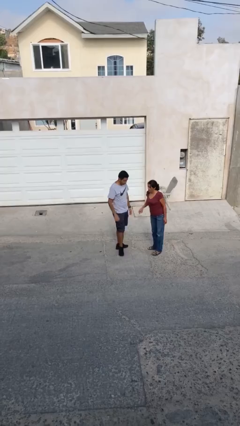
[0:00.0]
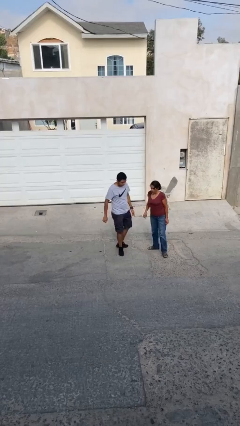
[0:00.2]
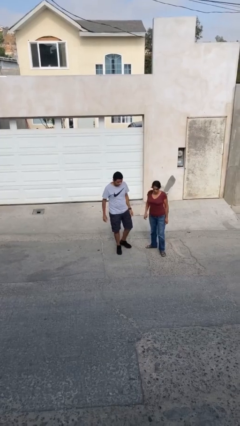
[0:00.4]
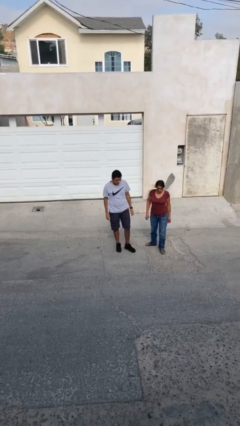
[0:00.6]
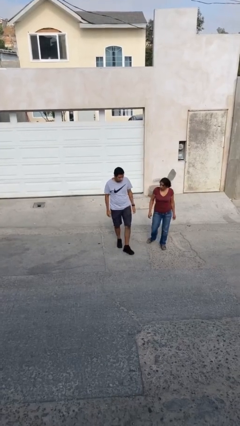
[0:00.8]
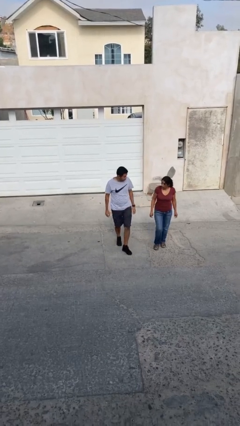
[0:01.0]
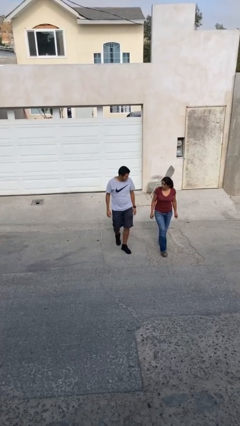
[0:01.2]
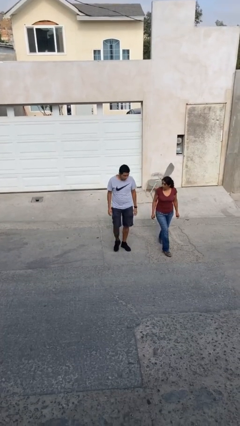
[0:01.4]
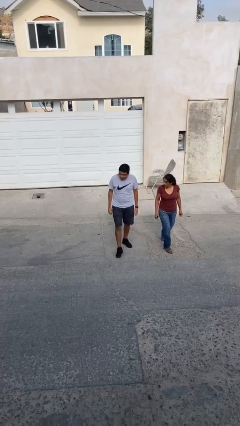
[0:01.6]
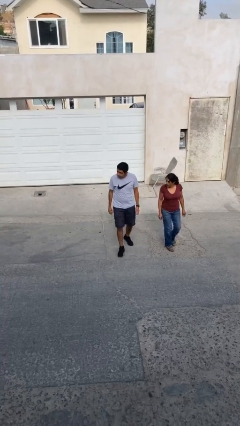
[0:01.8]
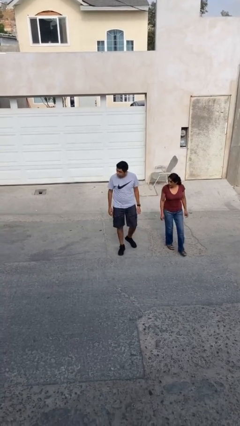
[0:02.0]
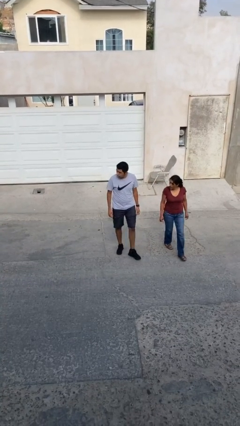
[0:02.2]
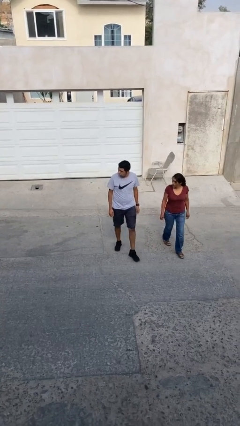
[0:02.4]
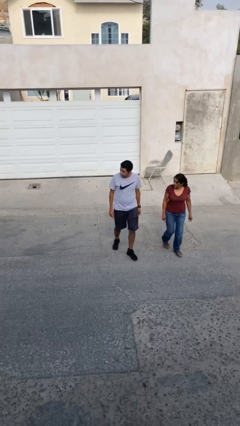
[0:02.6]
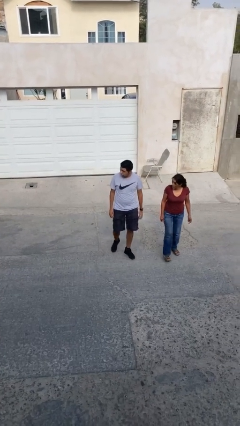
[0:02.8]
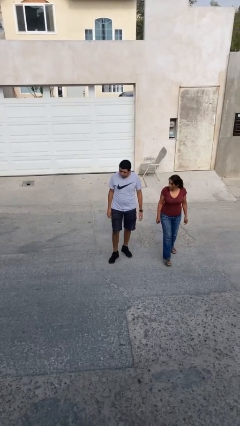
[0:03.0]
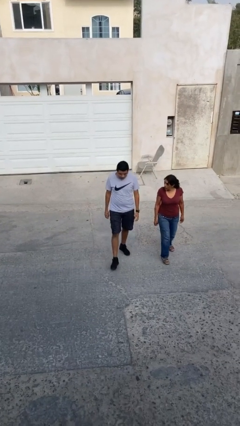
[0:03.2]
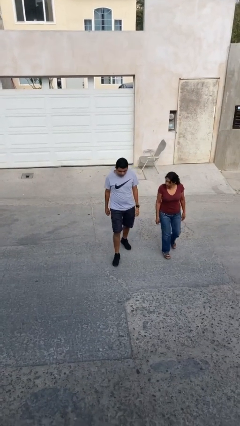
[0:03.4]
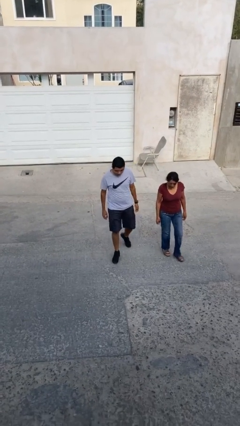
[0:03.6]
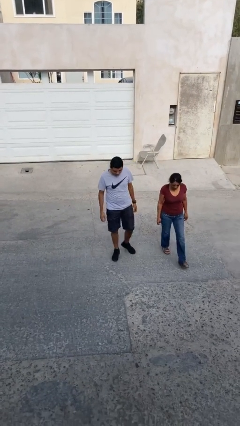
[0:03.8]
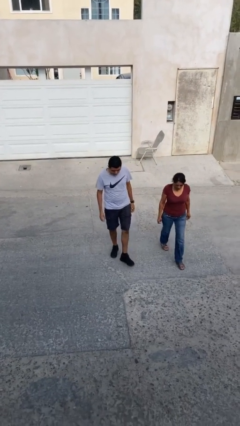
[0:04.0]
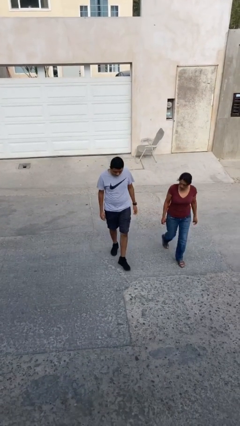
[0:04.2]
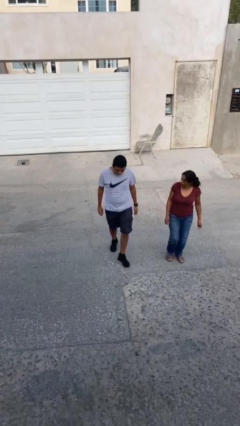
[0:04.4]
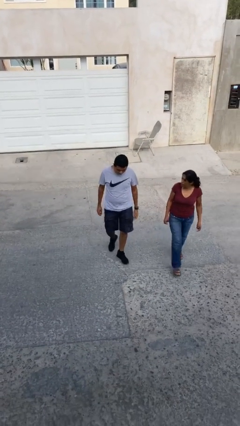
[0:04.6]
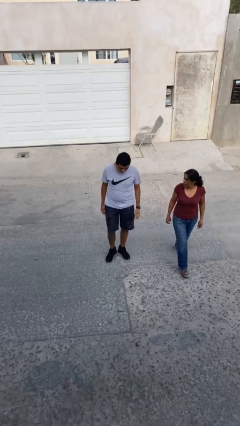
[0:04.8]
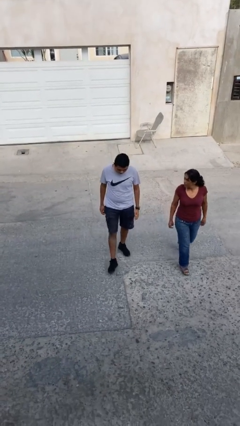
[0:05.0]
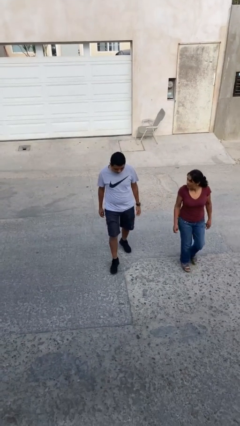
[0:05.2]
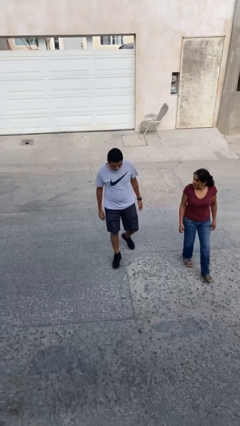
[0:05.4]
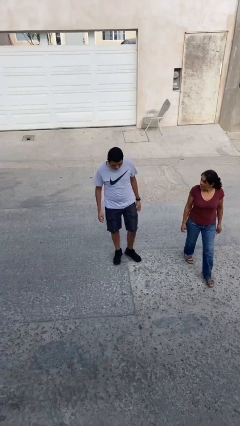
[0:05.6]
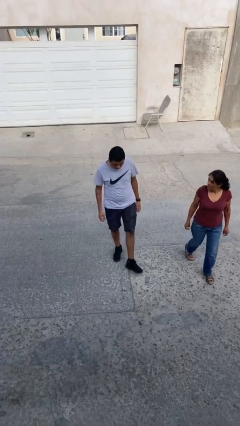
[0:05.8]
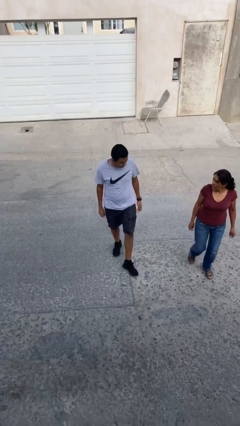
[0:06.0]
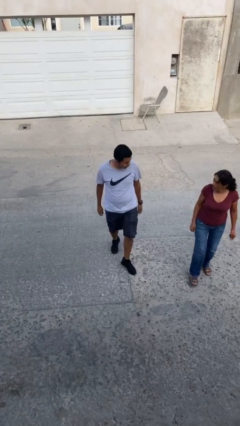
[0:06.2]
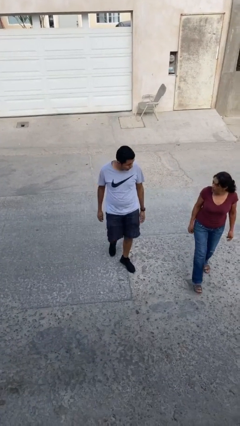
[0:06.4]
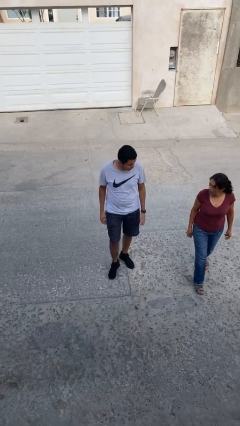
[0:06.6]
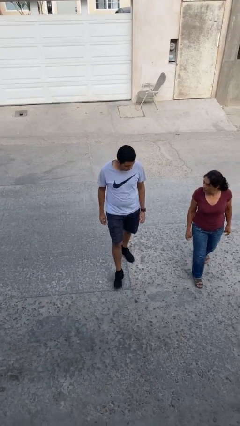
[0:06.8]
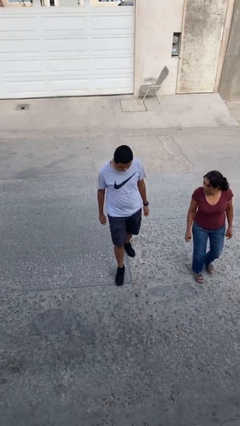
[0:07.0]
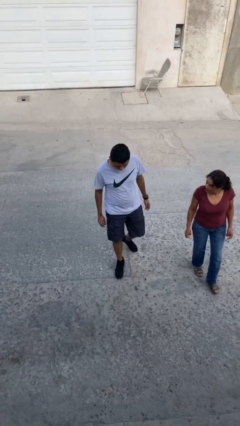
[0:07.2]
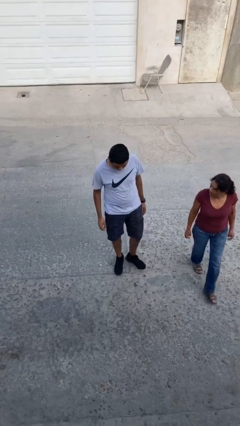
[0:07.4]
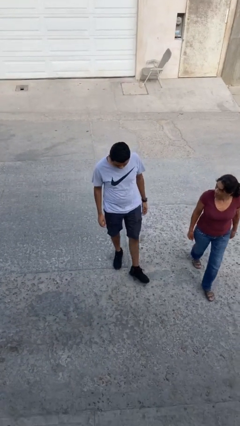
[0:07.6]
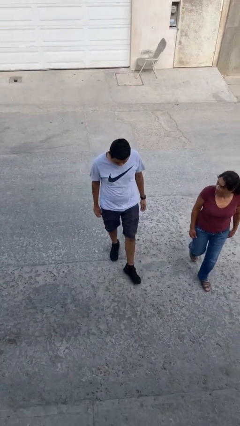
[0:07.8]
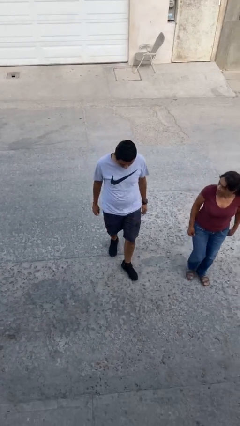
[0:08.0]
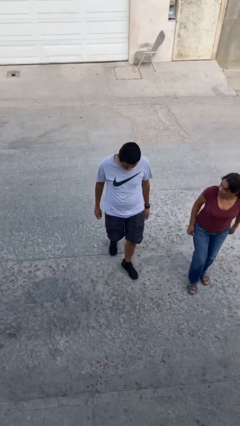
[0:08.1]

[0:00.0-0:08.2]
person talks to person

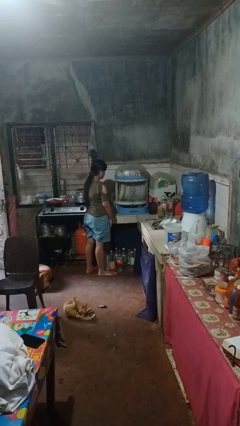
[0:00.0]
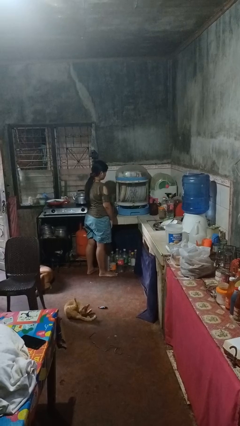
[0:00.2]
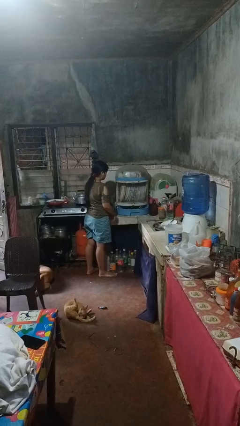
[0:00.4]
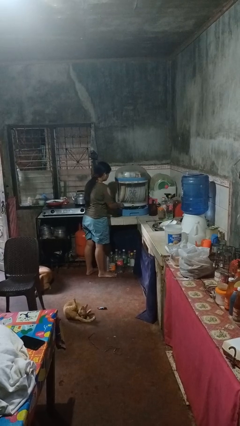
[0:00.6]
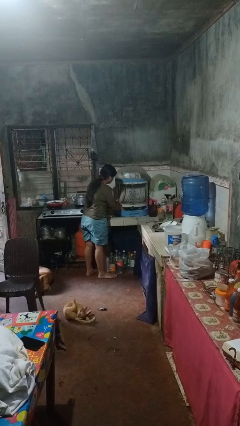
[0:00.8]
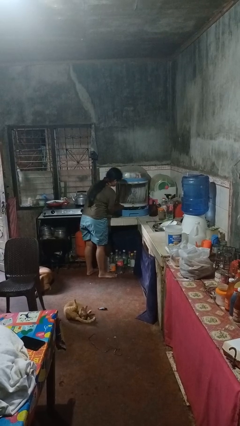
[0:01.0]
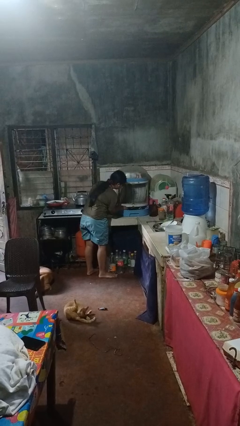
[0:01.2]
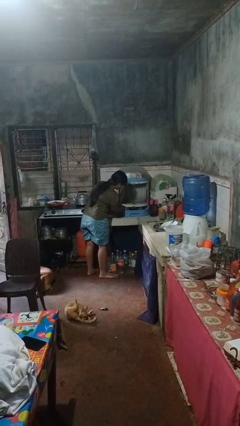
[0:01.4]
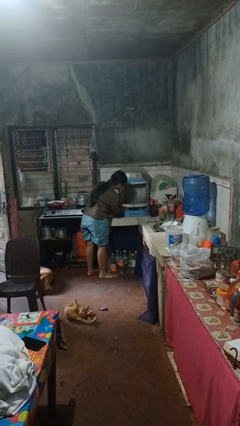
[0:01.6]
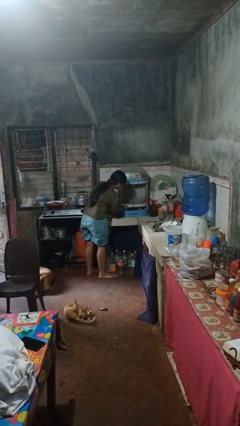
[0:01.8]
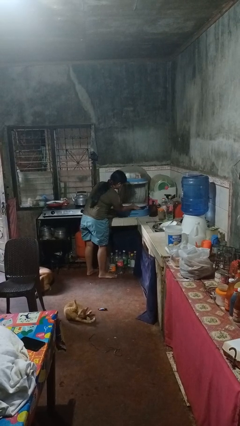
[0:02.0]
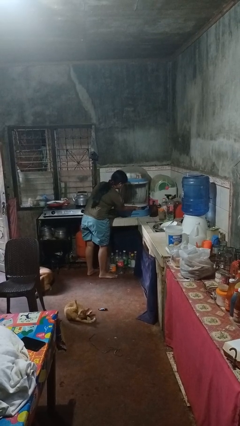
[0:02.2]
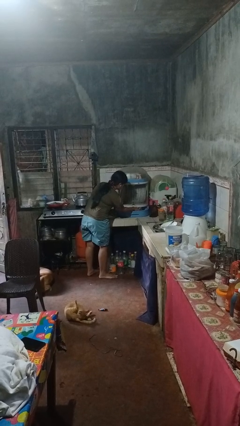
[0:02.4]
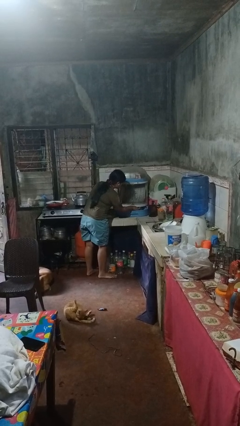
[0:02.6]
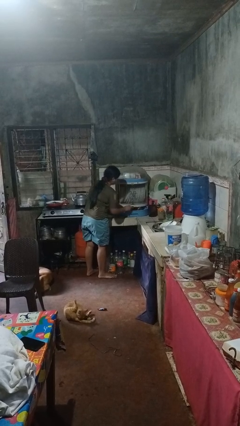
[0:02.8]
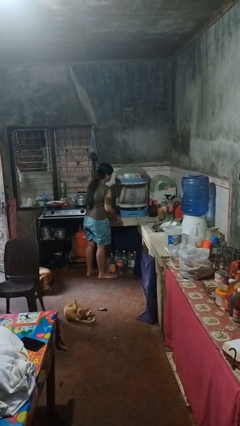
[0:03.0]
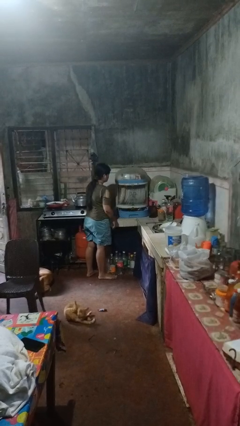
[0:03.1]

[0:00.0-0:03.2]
person searches in kitchen drawer

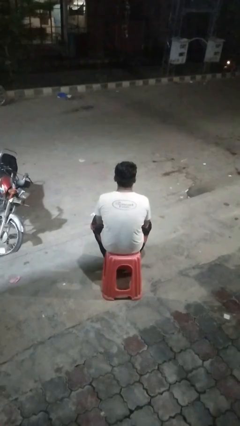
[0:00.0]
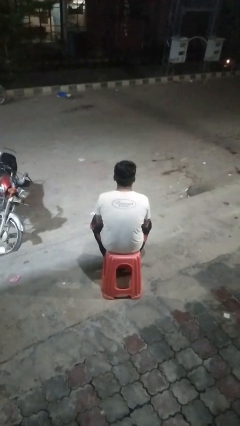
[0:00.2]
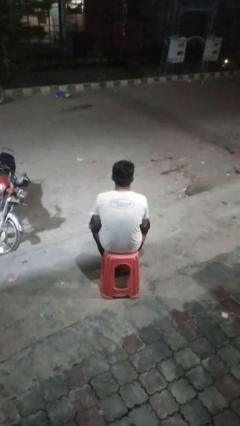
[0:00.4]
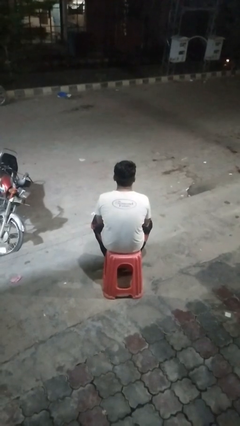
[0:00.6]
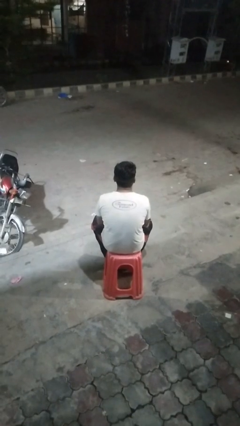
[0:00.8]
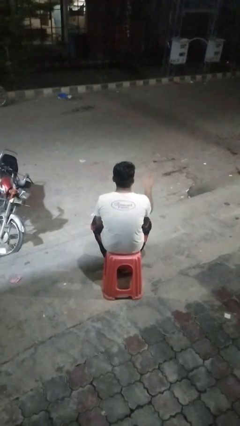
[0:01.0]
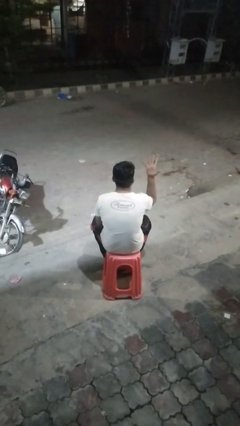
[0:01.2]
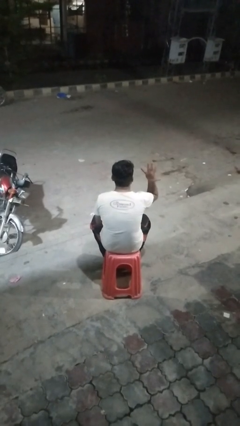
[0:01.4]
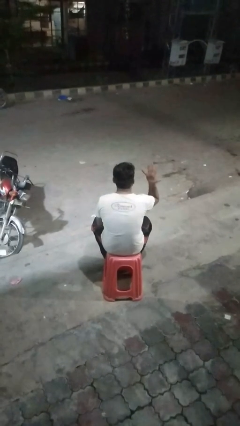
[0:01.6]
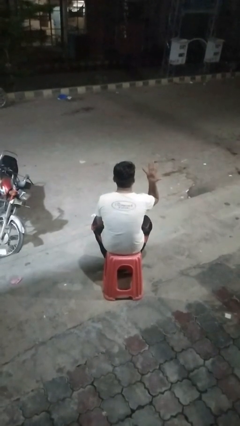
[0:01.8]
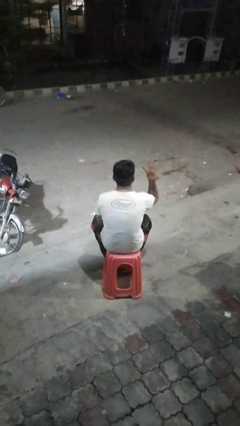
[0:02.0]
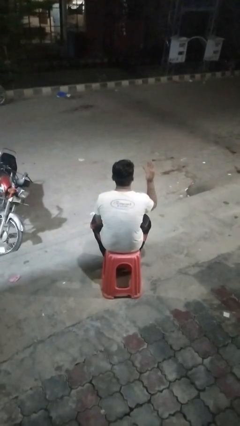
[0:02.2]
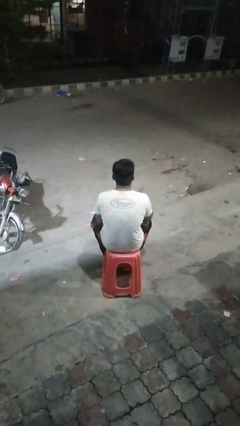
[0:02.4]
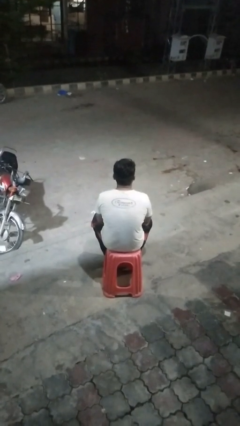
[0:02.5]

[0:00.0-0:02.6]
person gestures number five

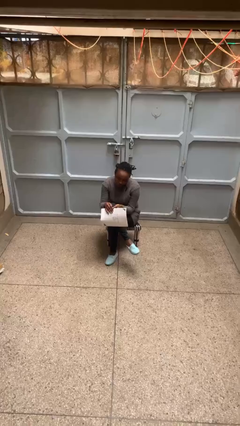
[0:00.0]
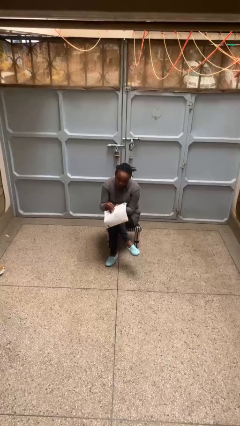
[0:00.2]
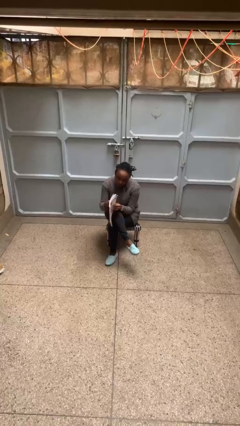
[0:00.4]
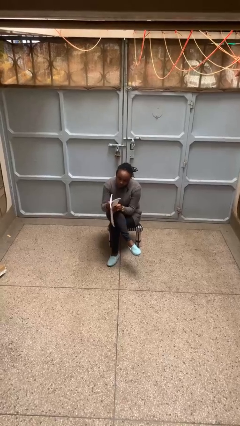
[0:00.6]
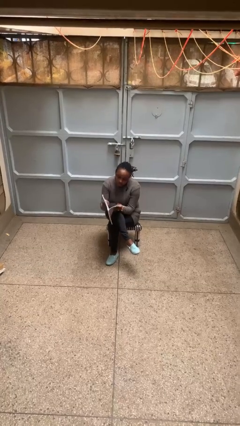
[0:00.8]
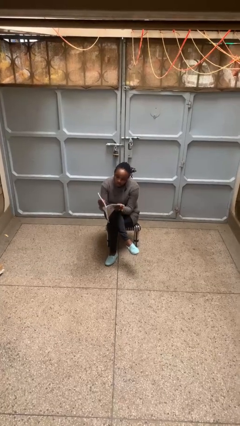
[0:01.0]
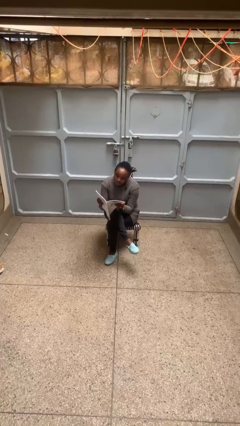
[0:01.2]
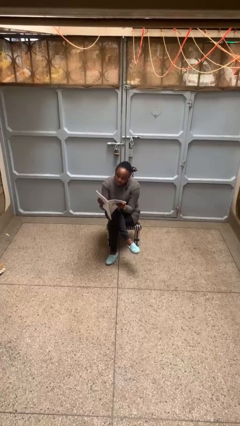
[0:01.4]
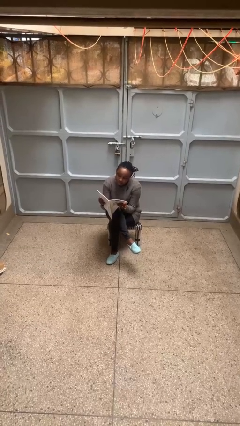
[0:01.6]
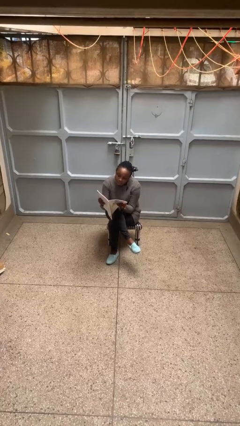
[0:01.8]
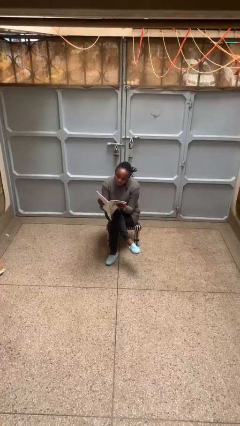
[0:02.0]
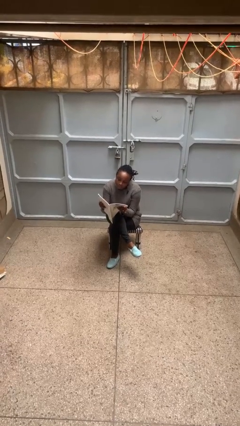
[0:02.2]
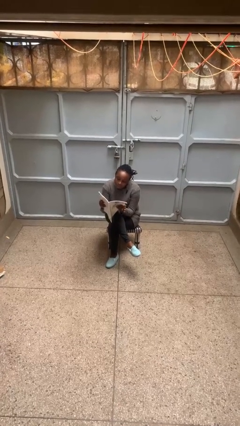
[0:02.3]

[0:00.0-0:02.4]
person reads magazine

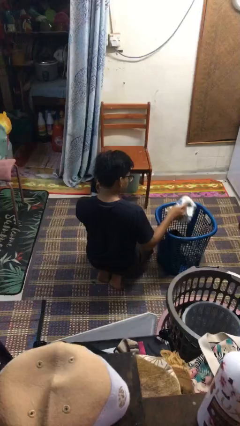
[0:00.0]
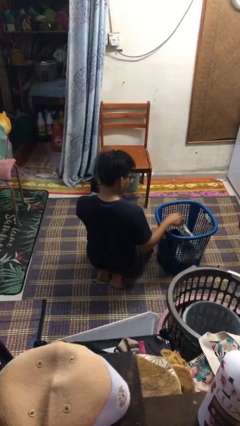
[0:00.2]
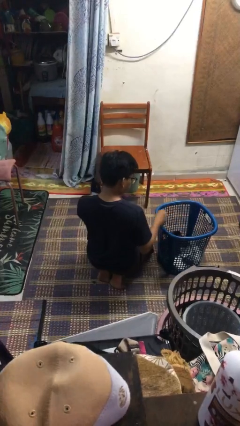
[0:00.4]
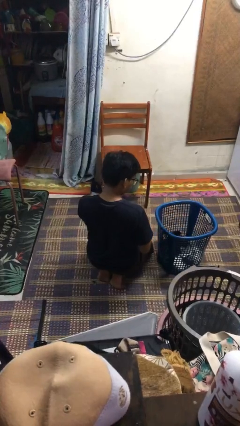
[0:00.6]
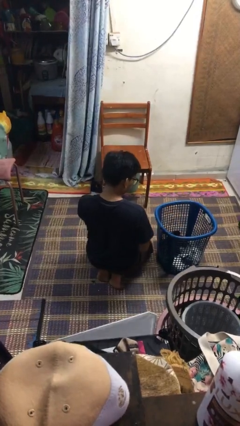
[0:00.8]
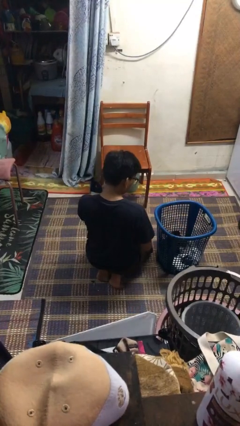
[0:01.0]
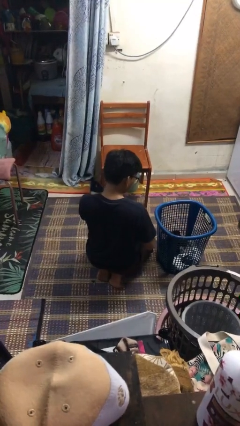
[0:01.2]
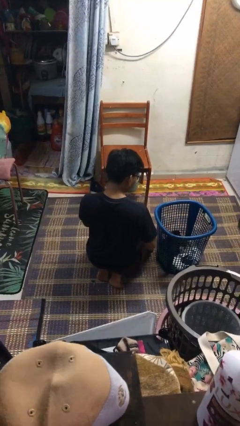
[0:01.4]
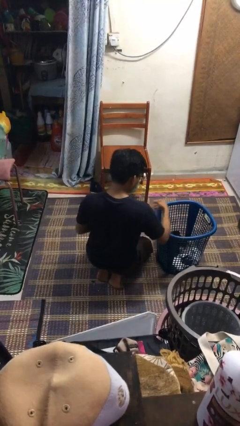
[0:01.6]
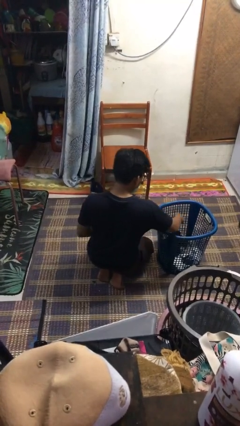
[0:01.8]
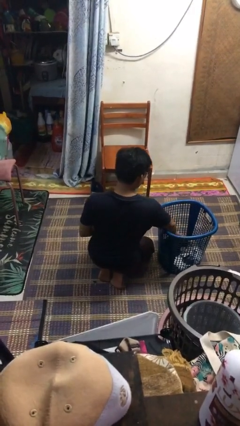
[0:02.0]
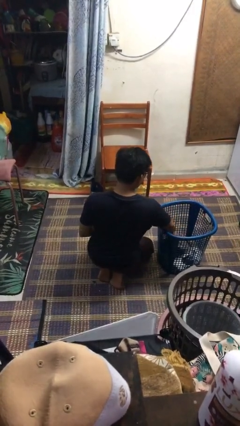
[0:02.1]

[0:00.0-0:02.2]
person puts object into basket
